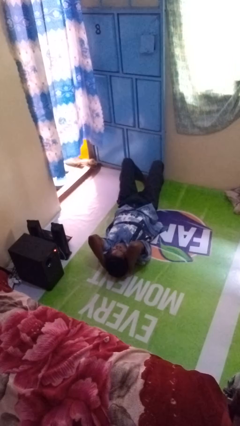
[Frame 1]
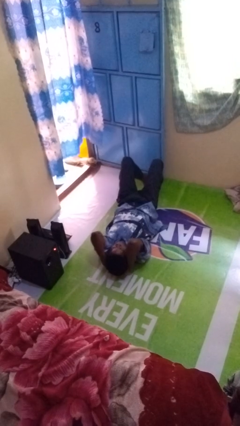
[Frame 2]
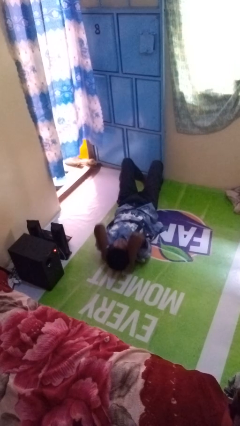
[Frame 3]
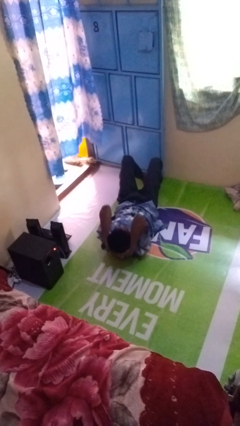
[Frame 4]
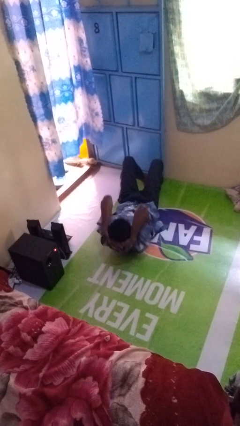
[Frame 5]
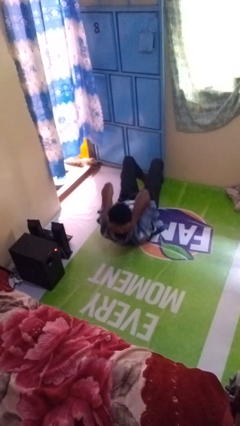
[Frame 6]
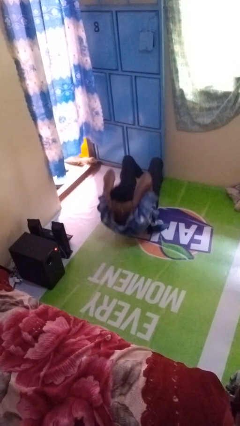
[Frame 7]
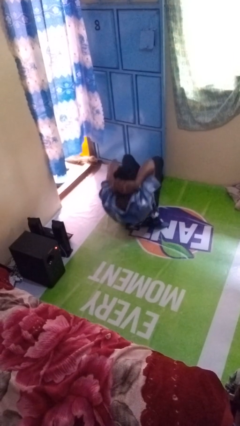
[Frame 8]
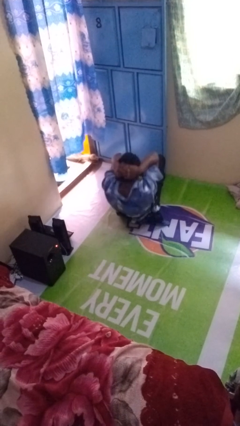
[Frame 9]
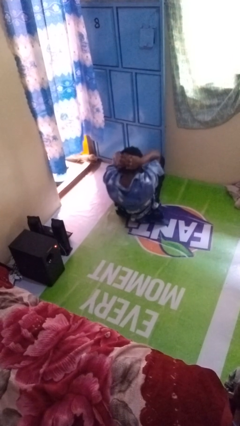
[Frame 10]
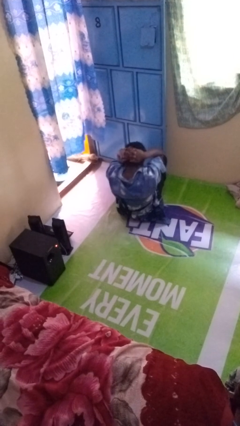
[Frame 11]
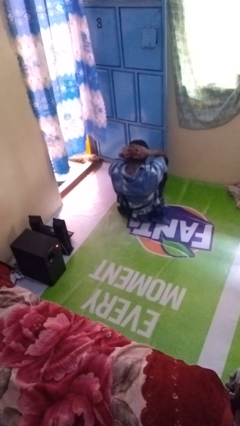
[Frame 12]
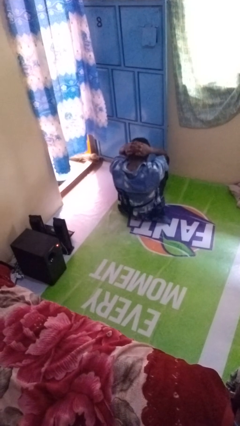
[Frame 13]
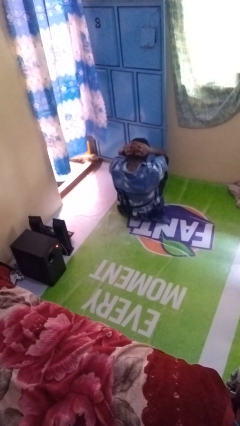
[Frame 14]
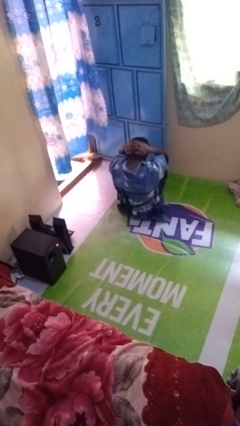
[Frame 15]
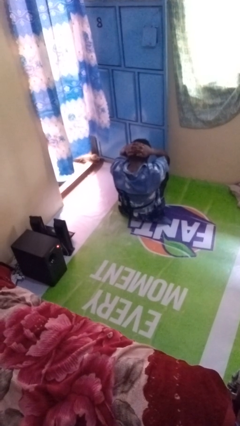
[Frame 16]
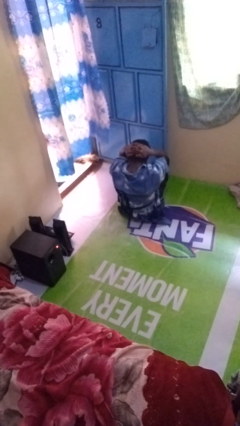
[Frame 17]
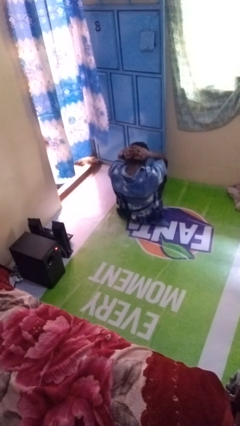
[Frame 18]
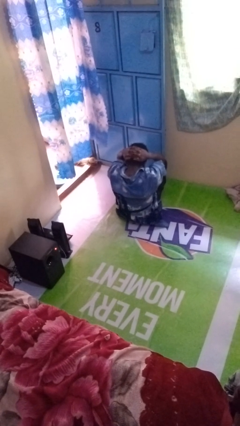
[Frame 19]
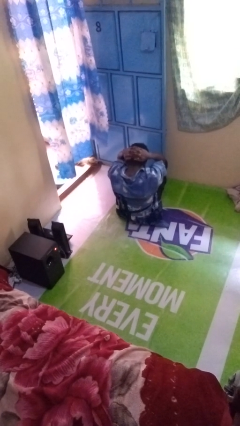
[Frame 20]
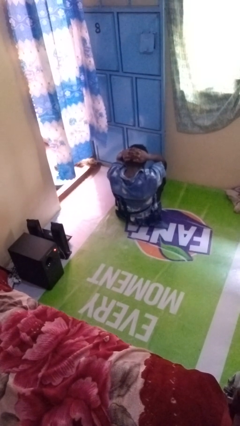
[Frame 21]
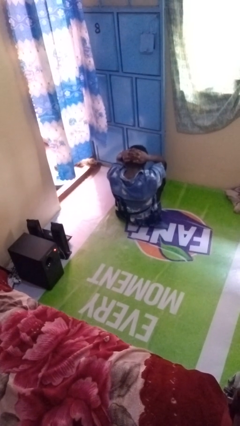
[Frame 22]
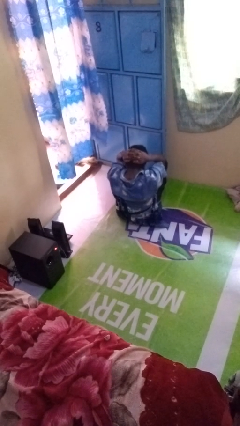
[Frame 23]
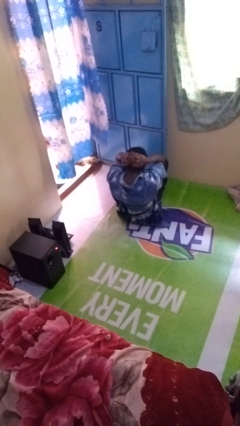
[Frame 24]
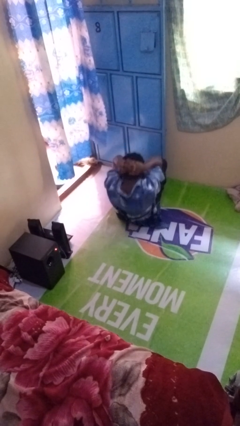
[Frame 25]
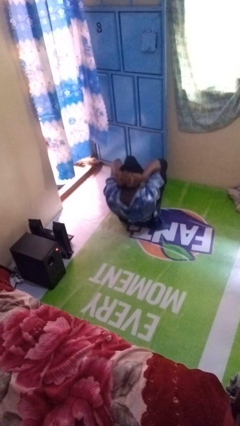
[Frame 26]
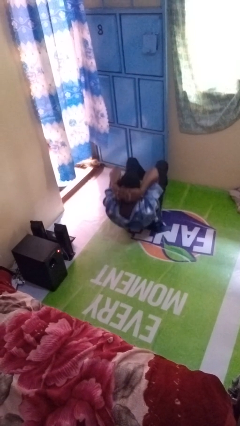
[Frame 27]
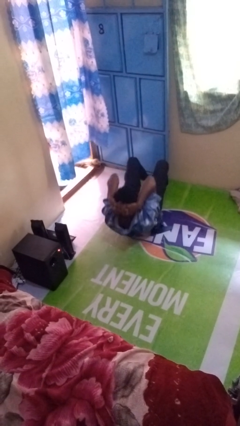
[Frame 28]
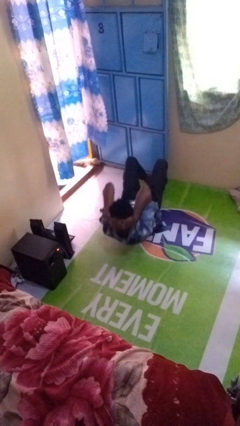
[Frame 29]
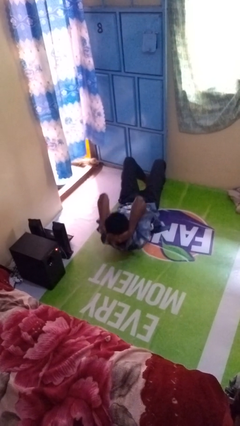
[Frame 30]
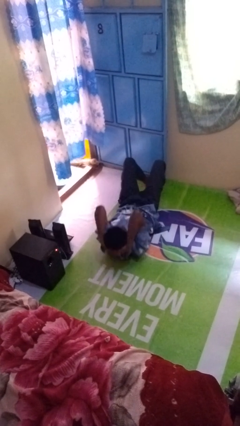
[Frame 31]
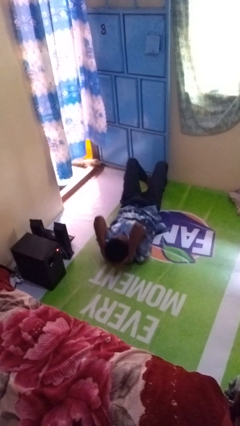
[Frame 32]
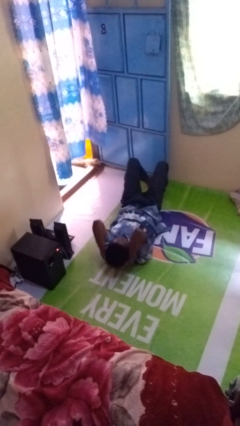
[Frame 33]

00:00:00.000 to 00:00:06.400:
person exercises with situp

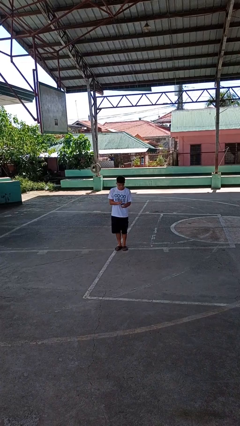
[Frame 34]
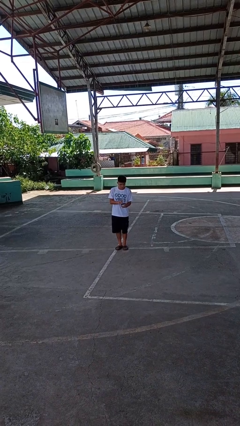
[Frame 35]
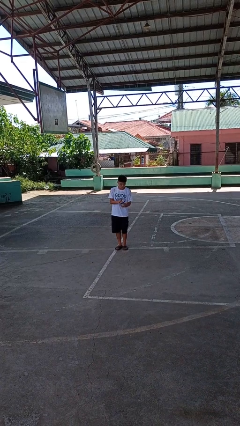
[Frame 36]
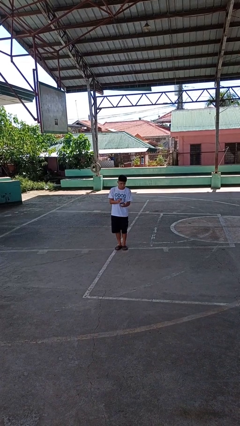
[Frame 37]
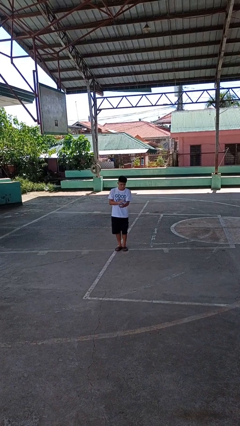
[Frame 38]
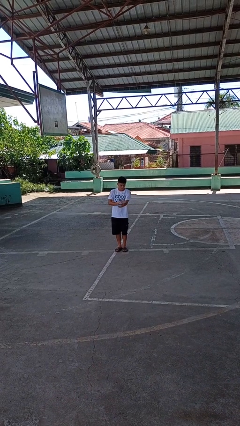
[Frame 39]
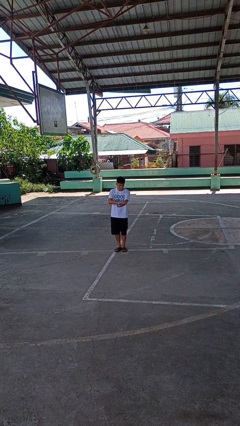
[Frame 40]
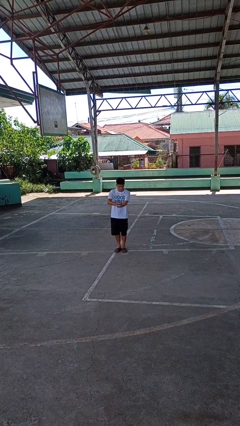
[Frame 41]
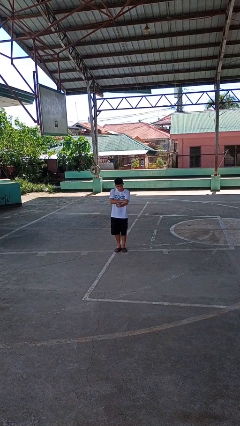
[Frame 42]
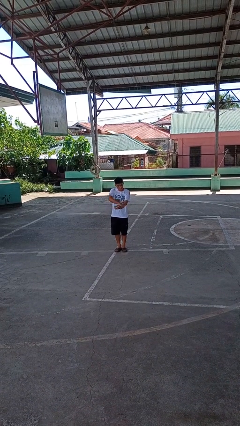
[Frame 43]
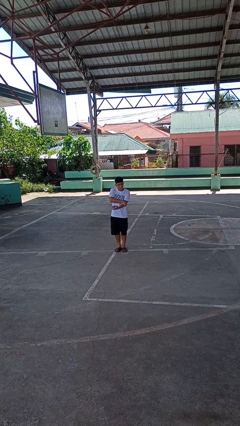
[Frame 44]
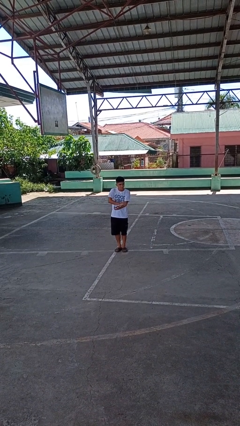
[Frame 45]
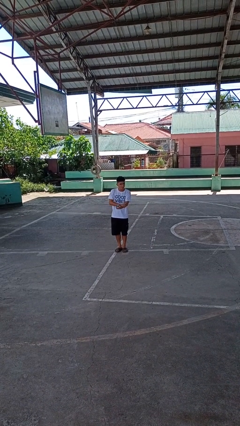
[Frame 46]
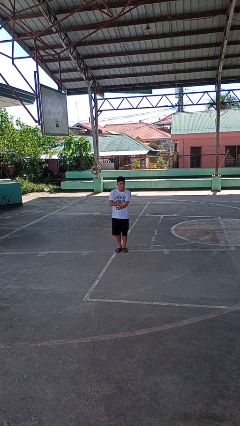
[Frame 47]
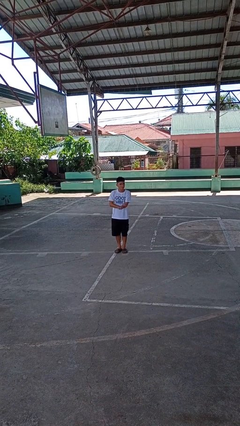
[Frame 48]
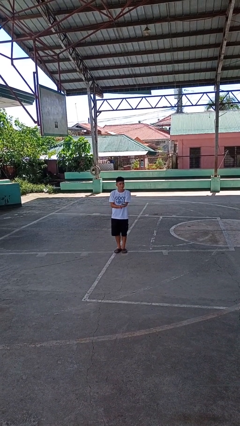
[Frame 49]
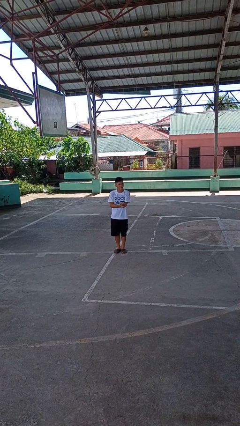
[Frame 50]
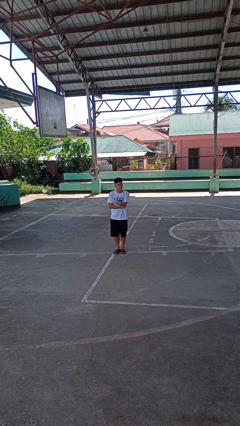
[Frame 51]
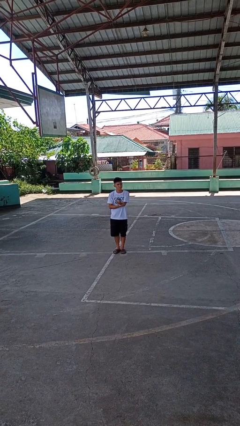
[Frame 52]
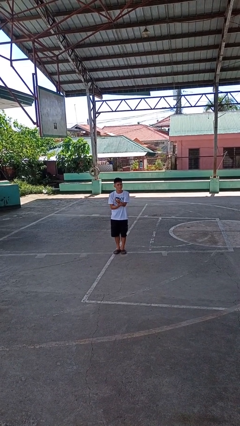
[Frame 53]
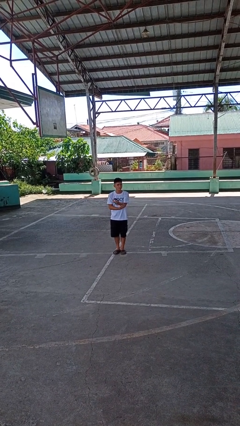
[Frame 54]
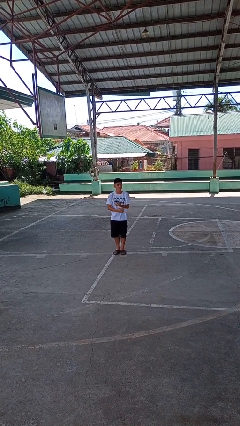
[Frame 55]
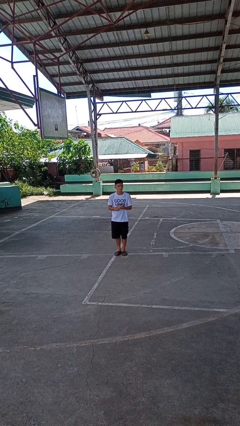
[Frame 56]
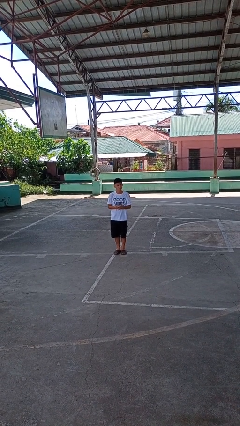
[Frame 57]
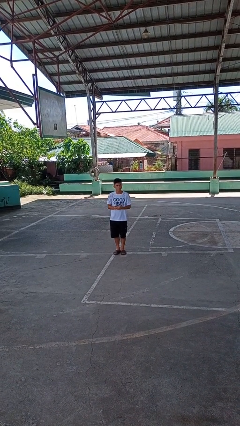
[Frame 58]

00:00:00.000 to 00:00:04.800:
person applies sunscreen

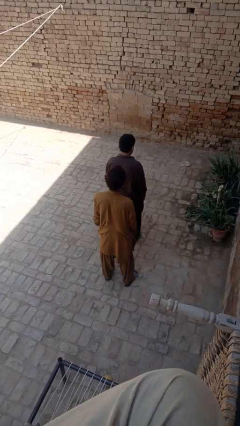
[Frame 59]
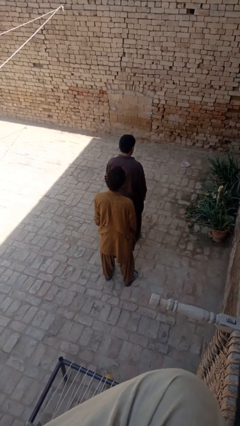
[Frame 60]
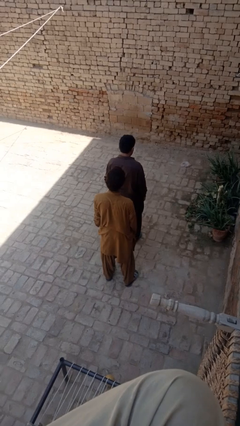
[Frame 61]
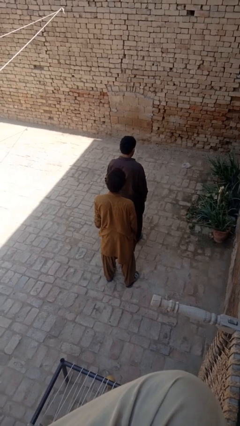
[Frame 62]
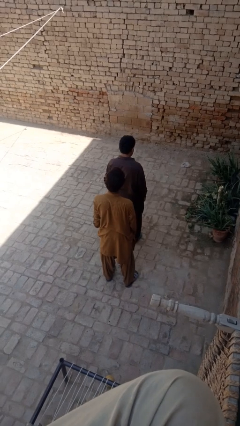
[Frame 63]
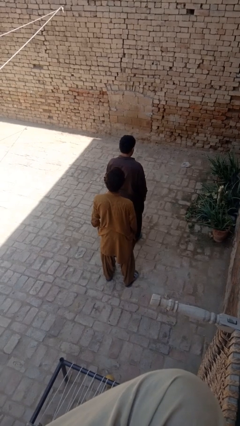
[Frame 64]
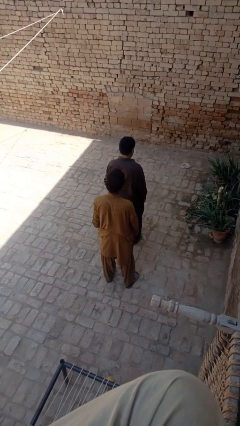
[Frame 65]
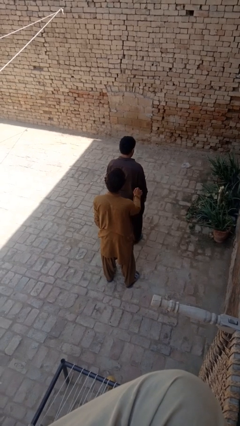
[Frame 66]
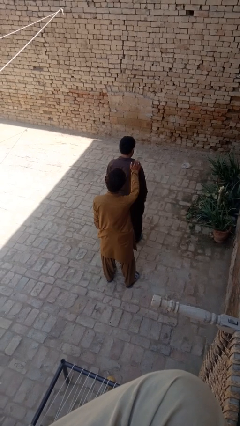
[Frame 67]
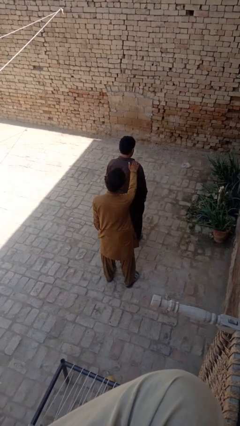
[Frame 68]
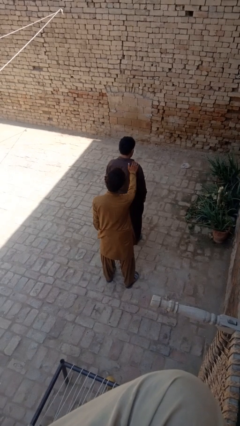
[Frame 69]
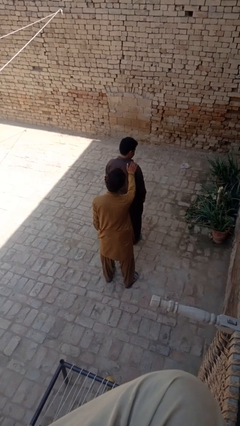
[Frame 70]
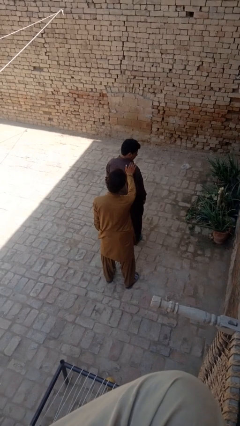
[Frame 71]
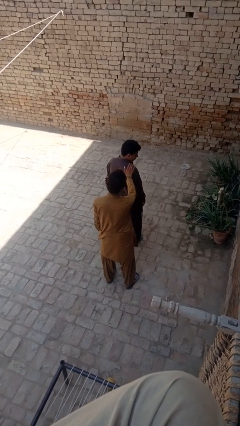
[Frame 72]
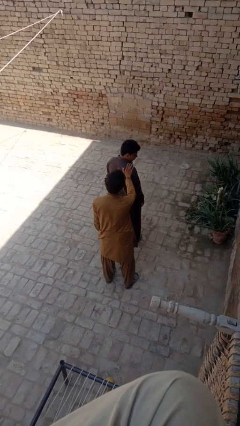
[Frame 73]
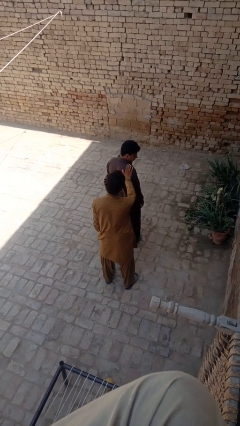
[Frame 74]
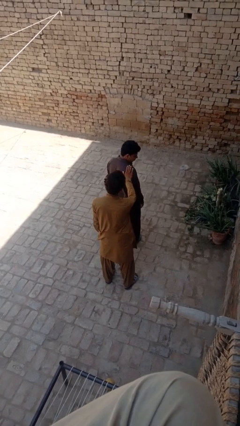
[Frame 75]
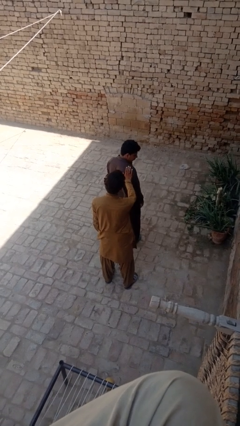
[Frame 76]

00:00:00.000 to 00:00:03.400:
person looks over shoulder

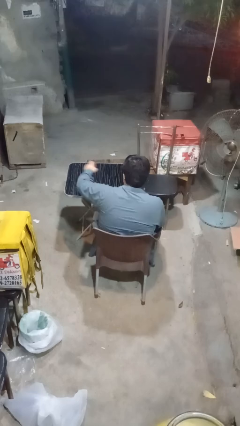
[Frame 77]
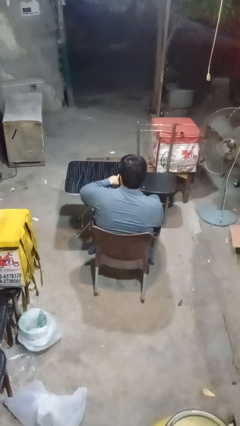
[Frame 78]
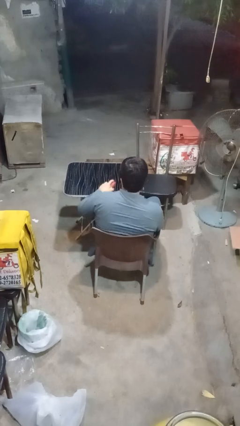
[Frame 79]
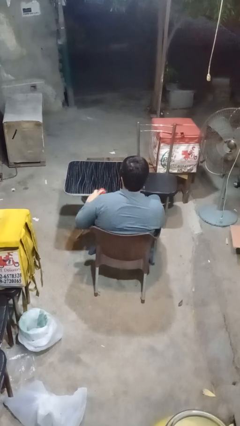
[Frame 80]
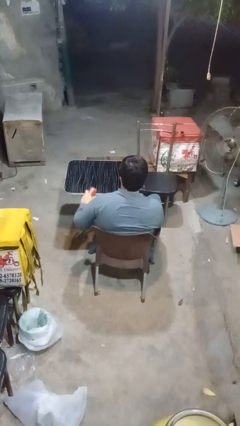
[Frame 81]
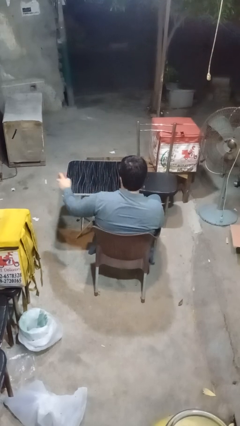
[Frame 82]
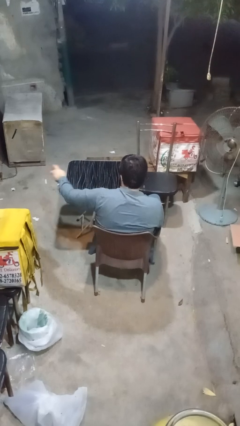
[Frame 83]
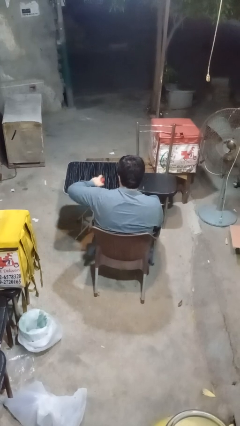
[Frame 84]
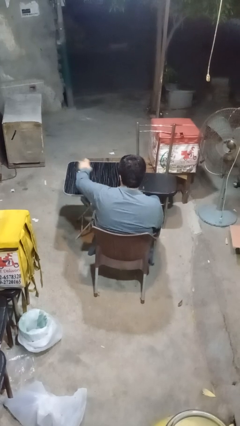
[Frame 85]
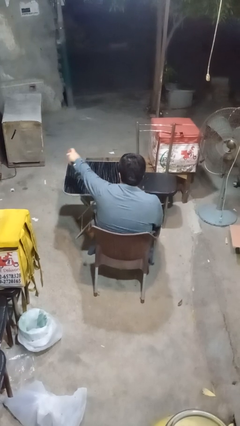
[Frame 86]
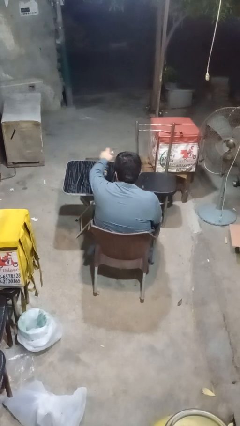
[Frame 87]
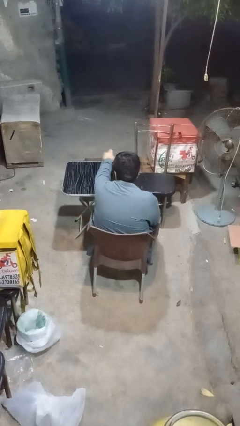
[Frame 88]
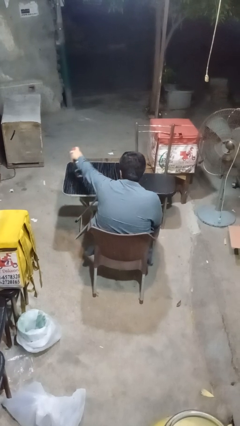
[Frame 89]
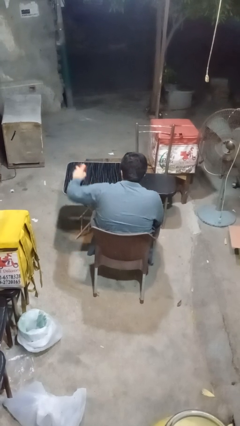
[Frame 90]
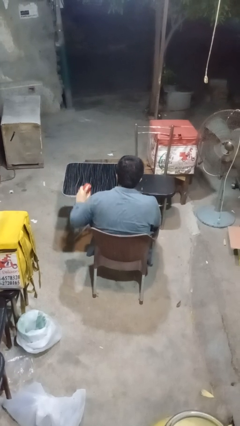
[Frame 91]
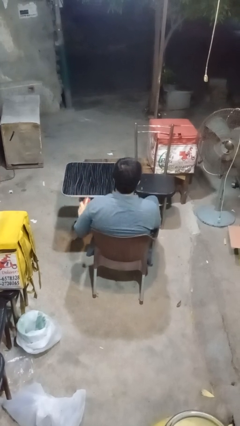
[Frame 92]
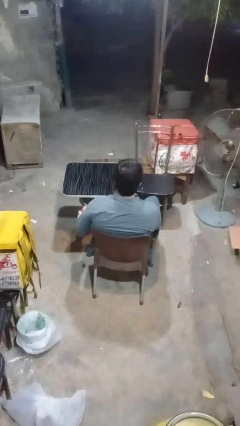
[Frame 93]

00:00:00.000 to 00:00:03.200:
person sprays from bottle
